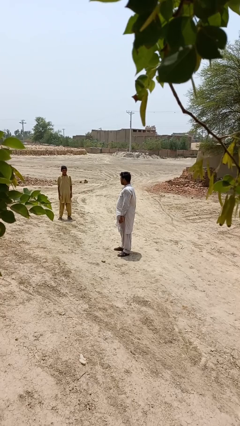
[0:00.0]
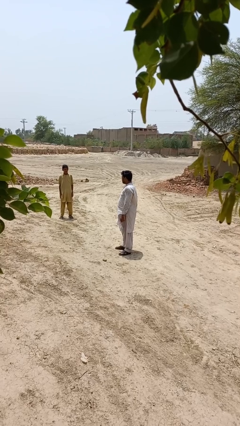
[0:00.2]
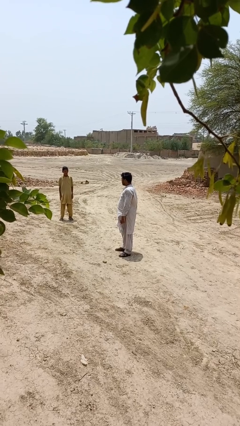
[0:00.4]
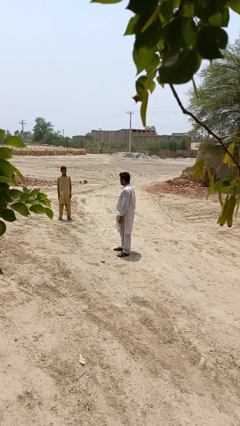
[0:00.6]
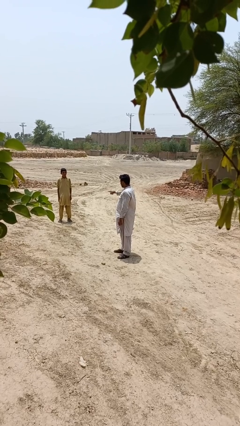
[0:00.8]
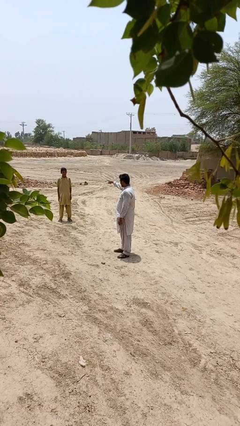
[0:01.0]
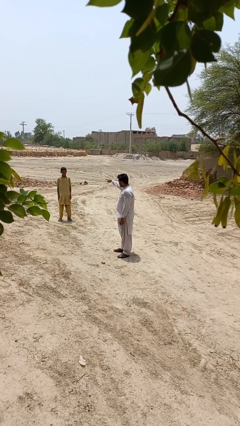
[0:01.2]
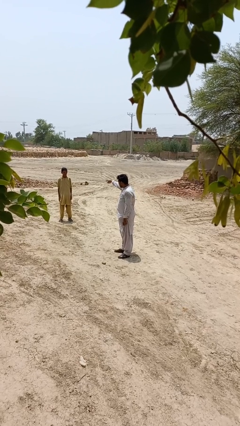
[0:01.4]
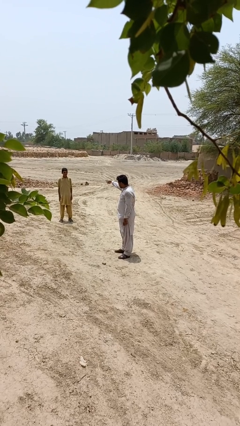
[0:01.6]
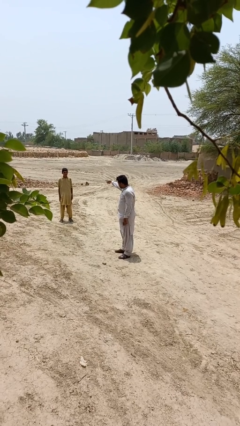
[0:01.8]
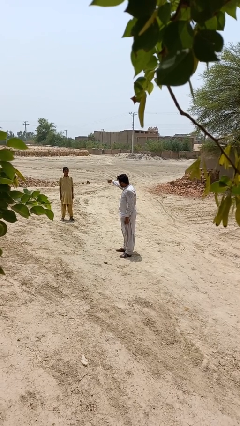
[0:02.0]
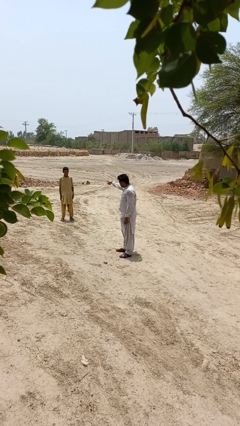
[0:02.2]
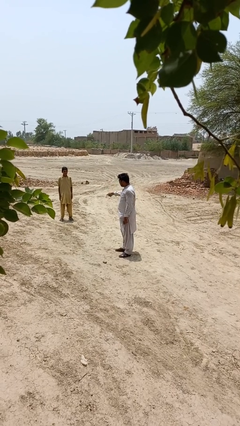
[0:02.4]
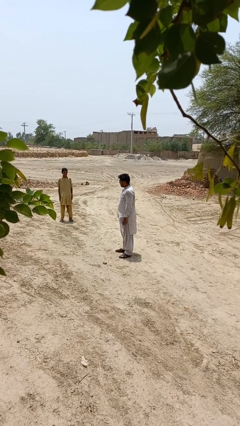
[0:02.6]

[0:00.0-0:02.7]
person points at person

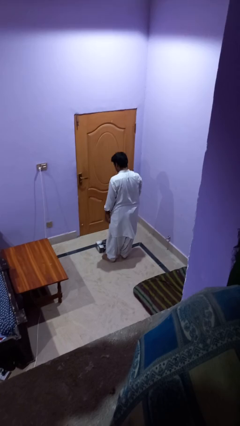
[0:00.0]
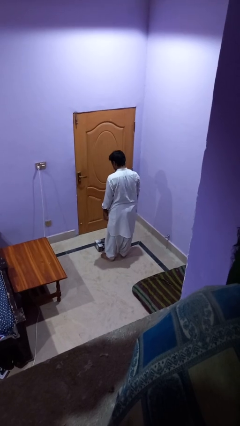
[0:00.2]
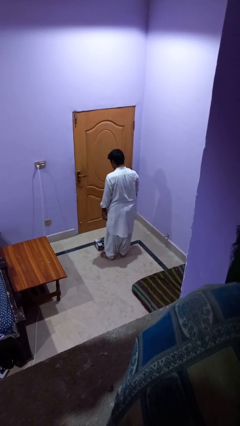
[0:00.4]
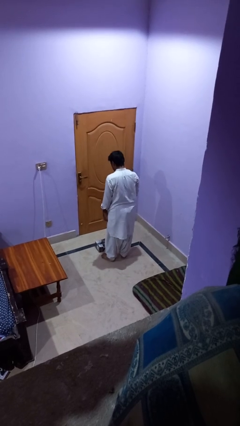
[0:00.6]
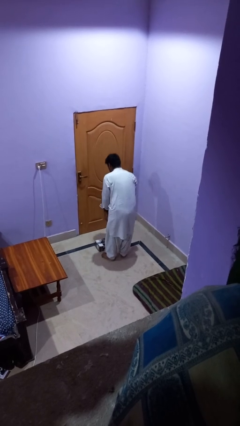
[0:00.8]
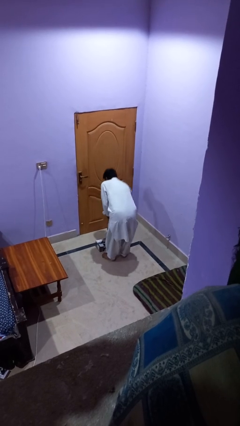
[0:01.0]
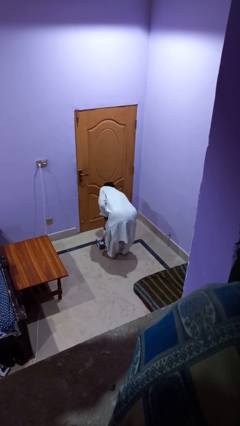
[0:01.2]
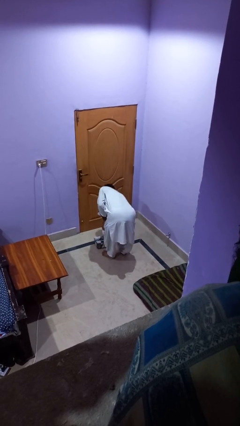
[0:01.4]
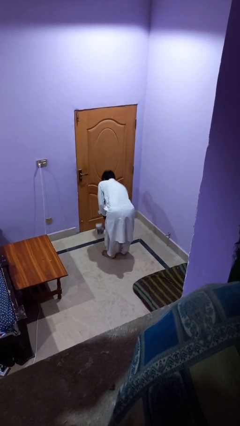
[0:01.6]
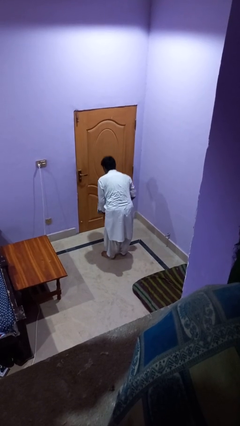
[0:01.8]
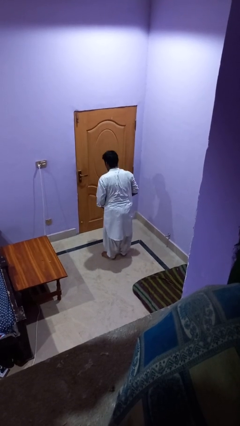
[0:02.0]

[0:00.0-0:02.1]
person picks up object from floor

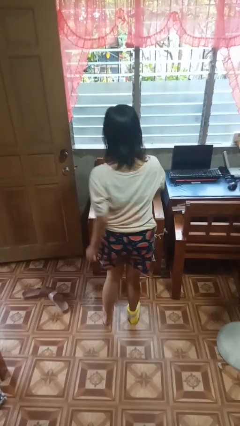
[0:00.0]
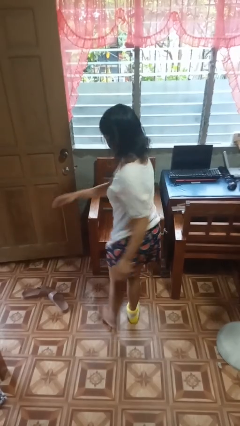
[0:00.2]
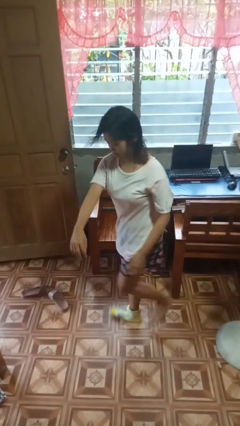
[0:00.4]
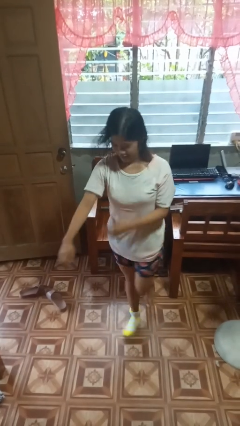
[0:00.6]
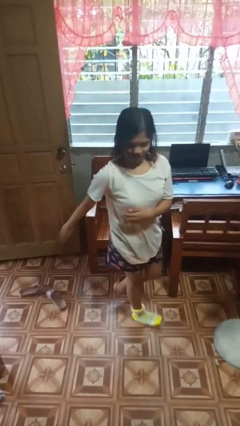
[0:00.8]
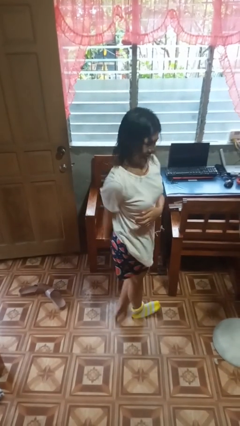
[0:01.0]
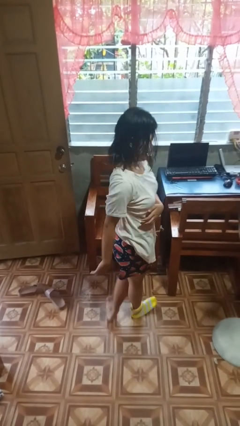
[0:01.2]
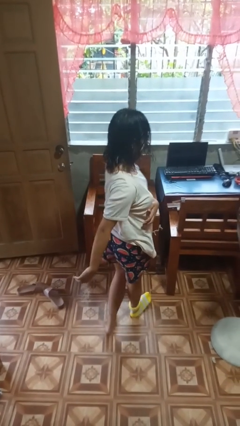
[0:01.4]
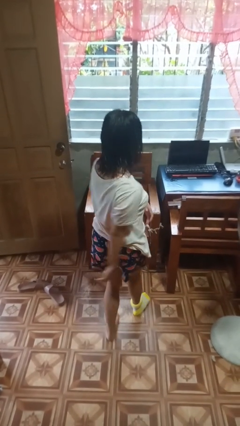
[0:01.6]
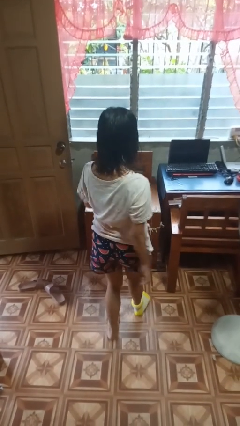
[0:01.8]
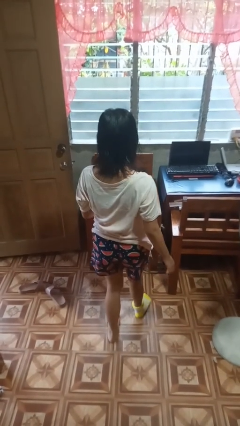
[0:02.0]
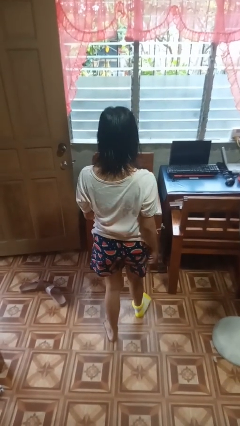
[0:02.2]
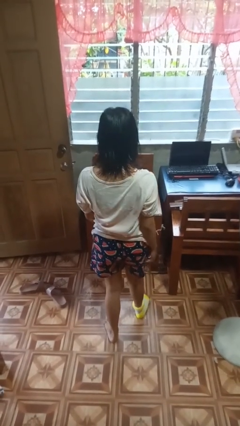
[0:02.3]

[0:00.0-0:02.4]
person twirls

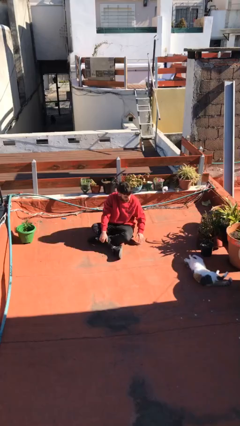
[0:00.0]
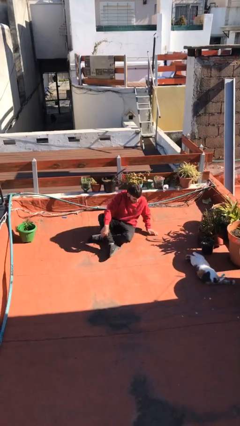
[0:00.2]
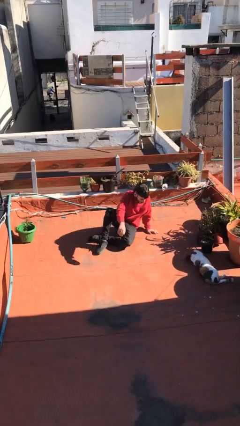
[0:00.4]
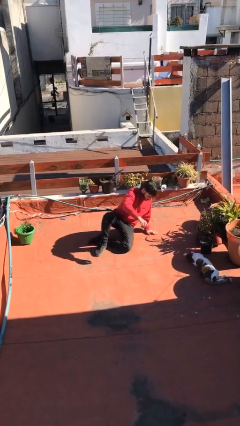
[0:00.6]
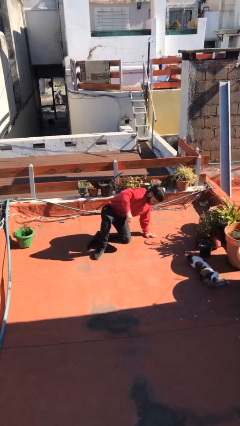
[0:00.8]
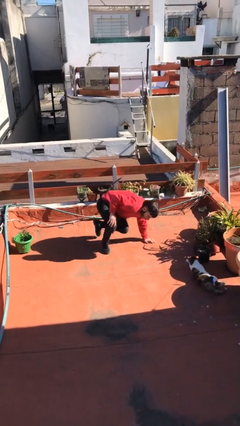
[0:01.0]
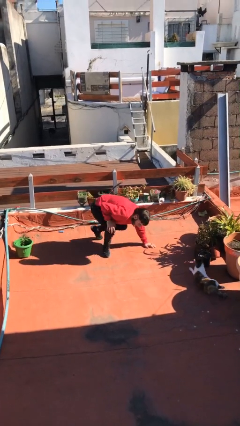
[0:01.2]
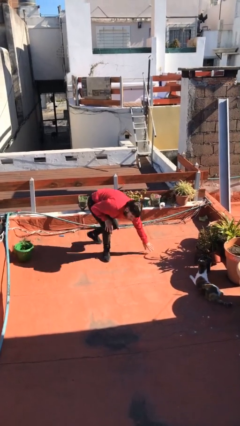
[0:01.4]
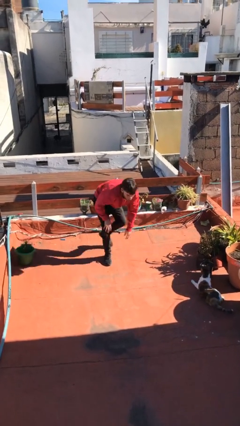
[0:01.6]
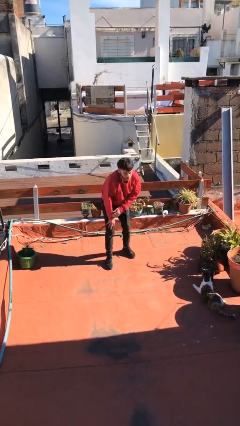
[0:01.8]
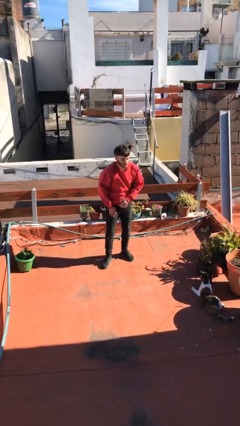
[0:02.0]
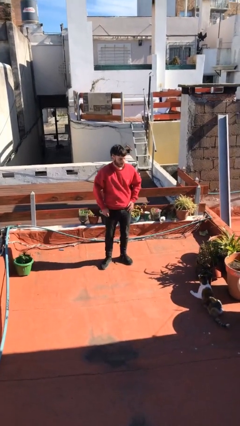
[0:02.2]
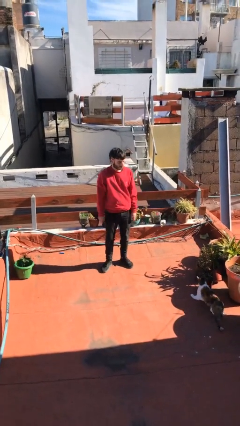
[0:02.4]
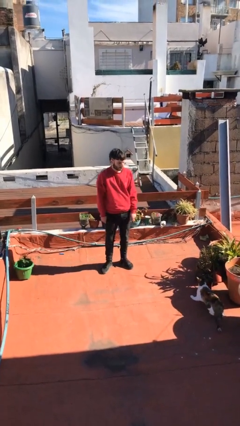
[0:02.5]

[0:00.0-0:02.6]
person stands up from floor

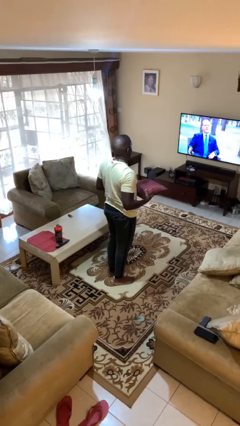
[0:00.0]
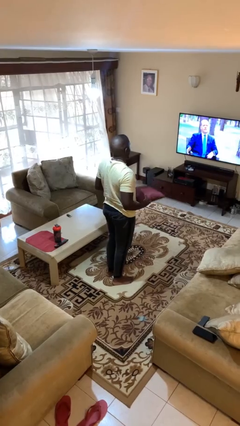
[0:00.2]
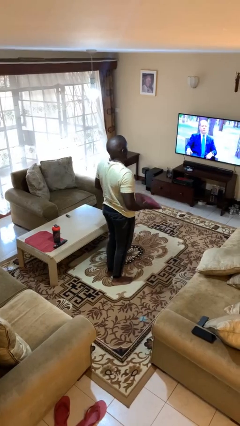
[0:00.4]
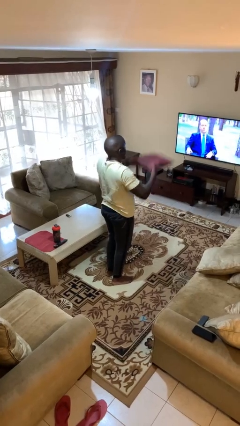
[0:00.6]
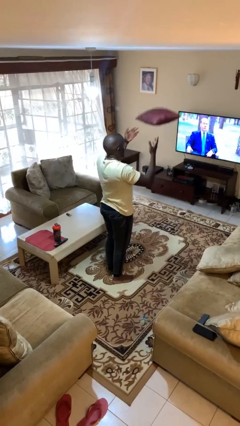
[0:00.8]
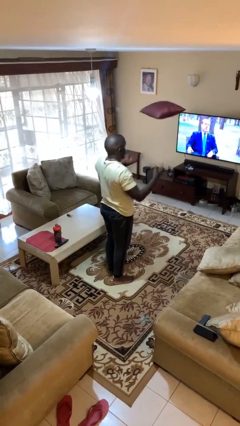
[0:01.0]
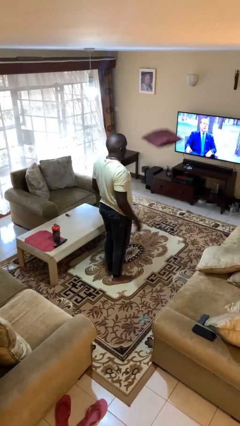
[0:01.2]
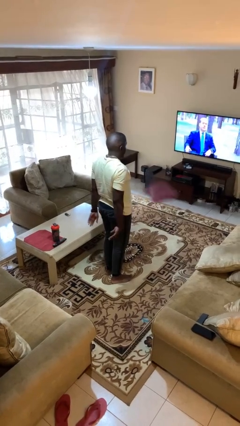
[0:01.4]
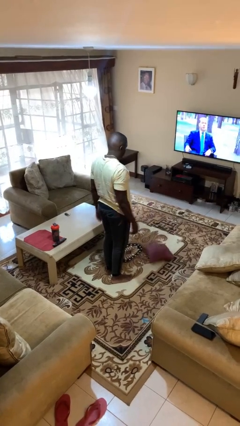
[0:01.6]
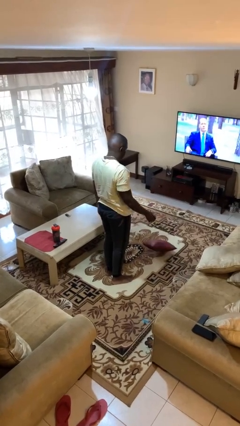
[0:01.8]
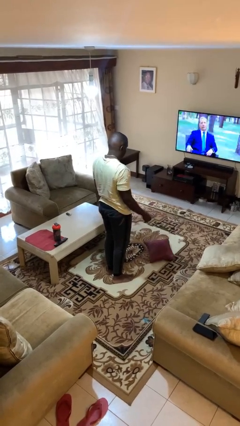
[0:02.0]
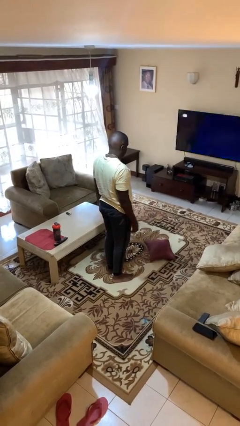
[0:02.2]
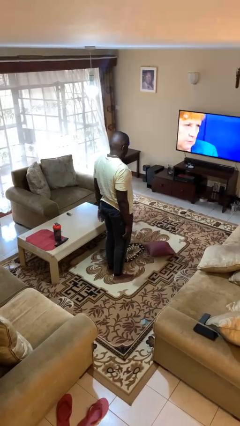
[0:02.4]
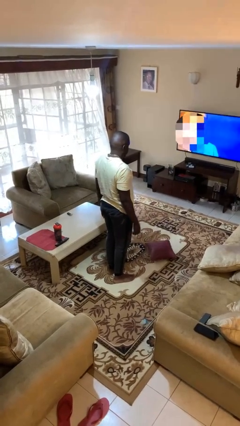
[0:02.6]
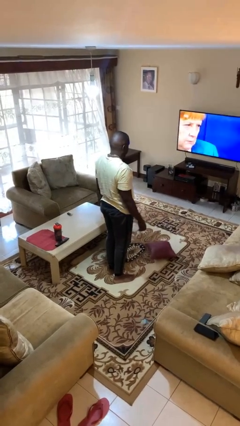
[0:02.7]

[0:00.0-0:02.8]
person throws object into air

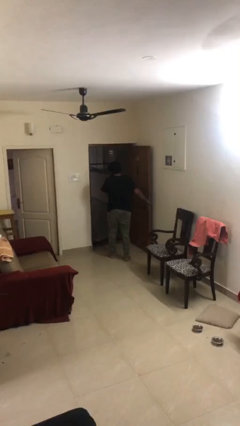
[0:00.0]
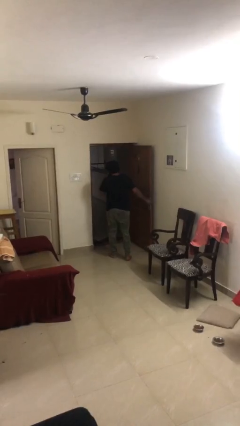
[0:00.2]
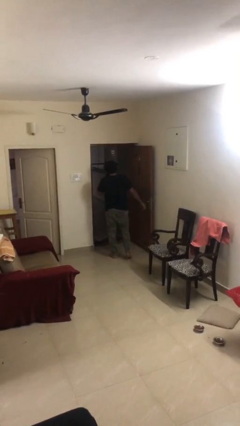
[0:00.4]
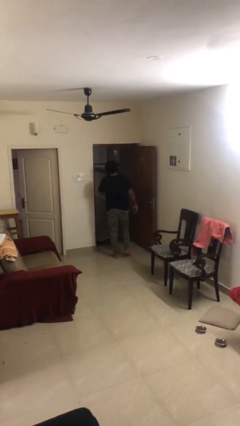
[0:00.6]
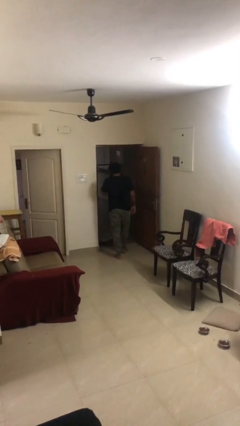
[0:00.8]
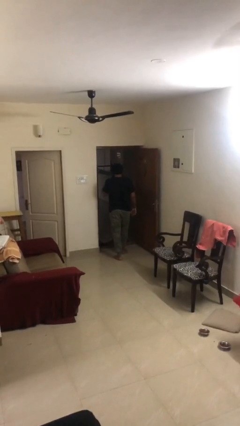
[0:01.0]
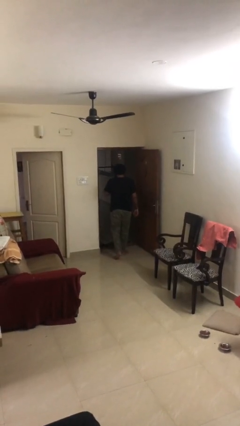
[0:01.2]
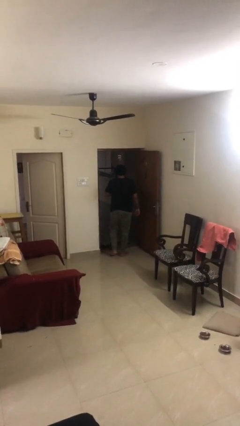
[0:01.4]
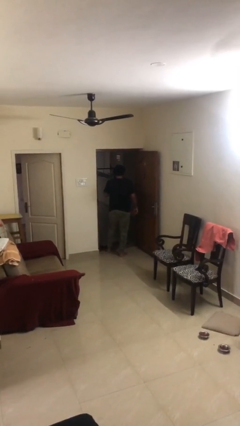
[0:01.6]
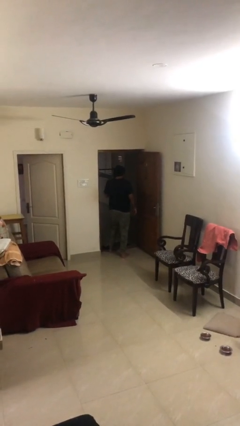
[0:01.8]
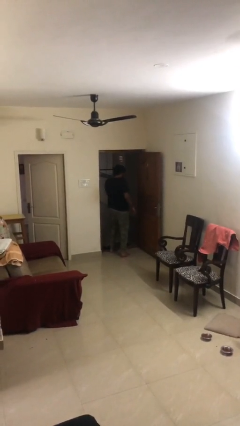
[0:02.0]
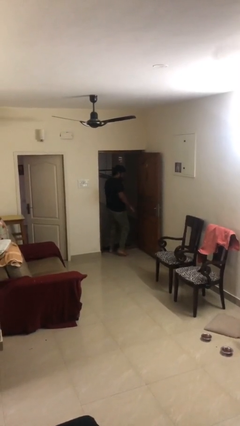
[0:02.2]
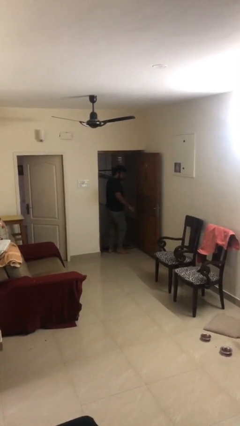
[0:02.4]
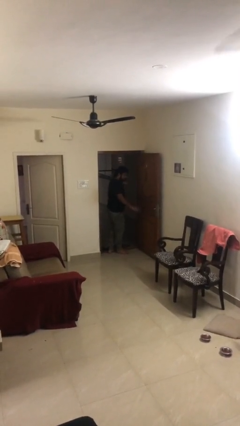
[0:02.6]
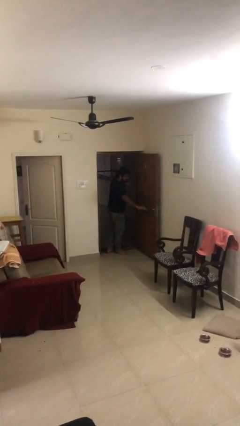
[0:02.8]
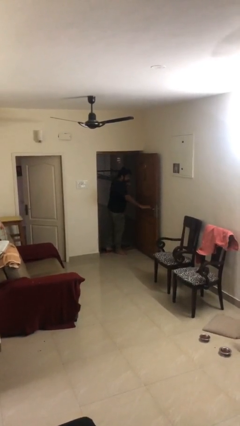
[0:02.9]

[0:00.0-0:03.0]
person exits scene through structure

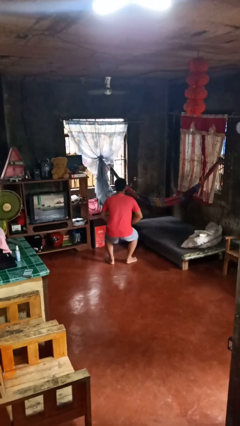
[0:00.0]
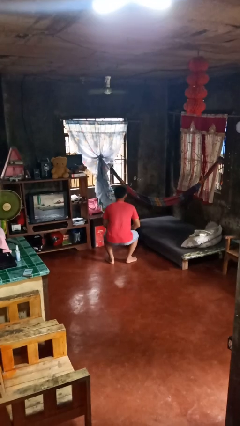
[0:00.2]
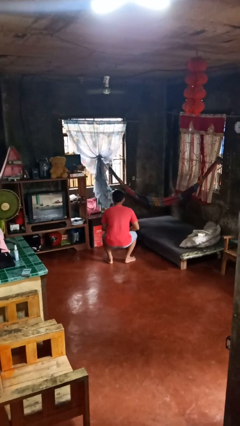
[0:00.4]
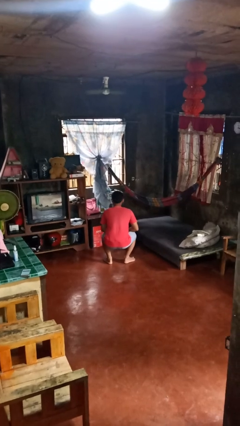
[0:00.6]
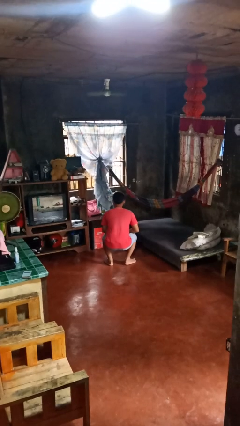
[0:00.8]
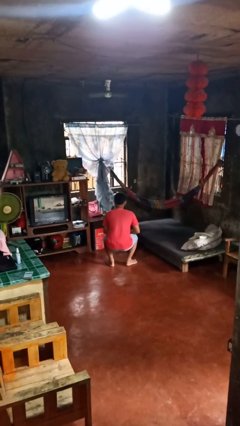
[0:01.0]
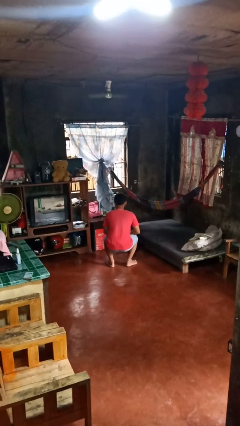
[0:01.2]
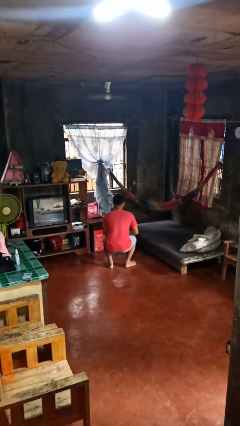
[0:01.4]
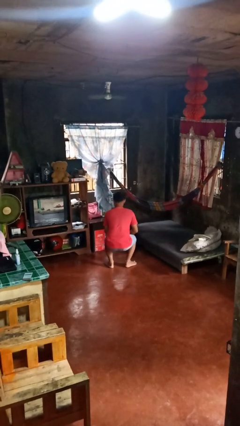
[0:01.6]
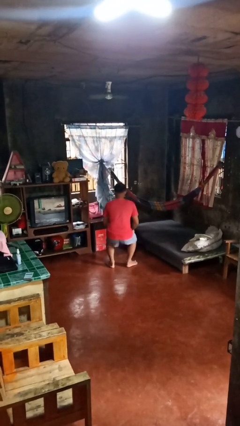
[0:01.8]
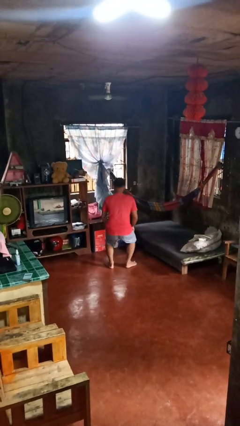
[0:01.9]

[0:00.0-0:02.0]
person squats
